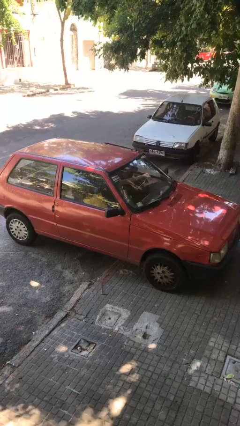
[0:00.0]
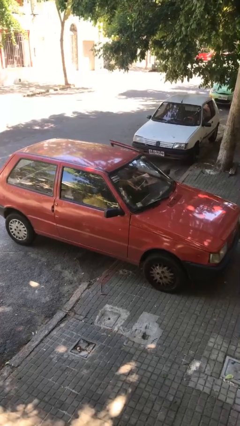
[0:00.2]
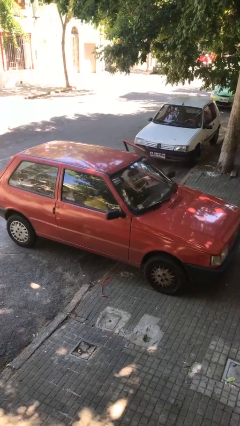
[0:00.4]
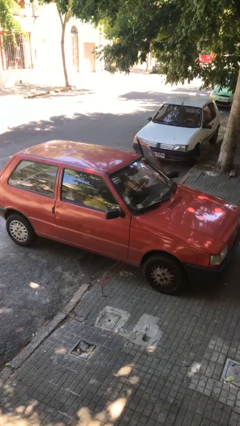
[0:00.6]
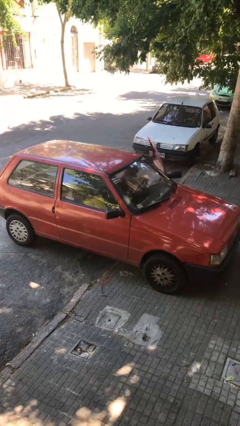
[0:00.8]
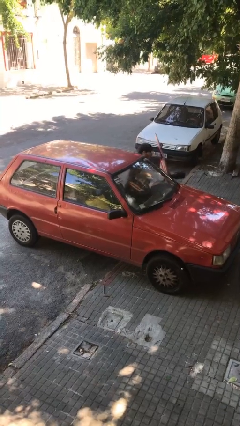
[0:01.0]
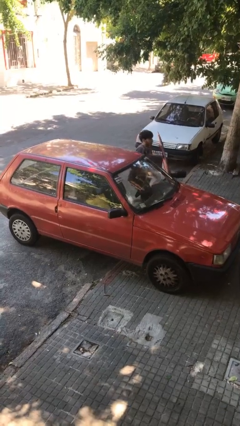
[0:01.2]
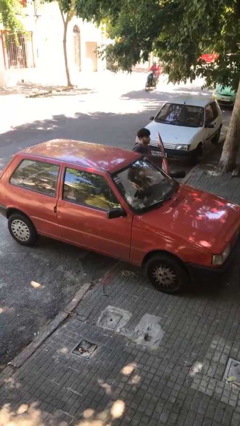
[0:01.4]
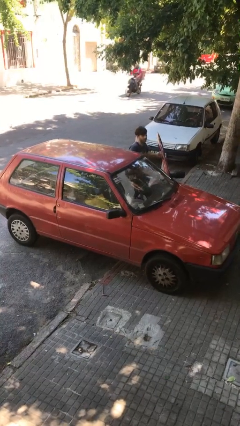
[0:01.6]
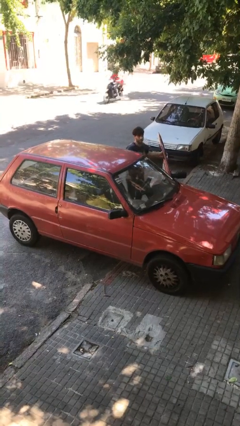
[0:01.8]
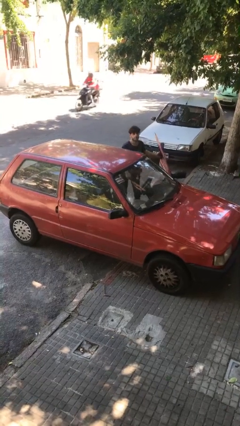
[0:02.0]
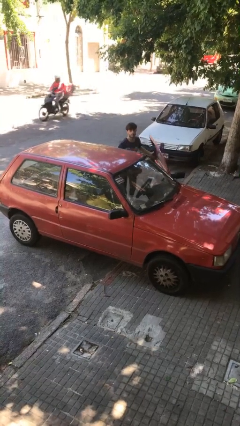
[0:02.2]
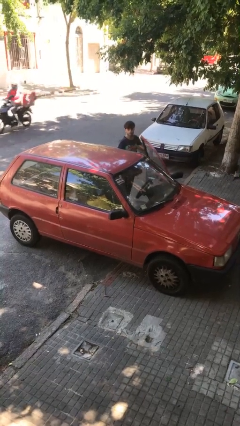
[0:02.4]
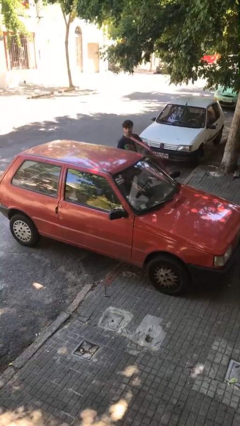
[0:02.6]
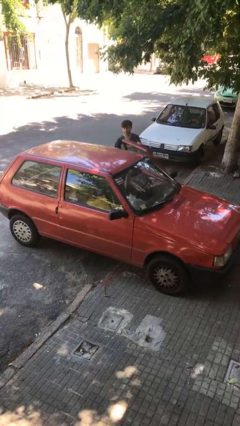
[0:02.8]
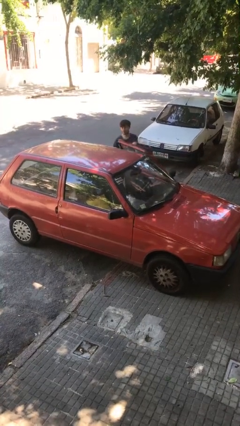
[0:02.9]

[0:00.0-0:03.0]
car drops off person

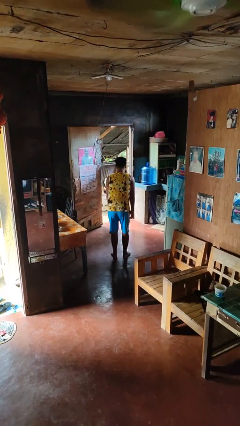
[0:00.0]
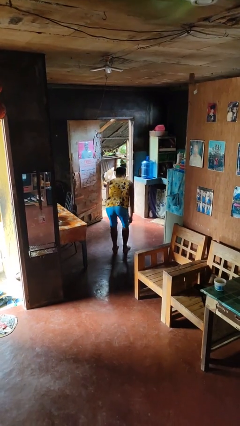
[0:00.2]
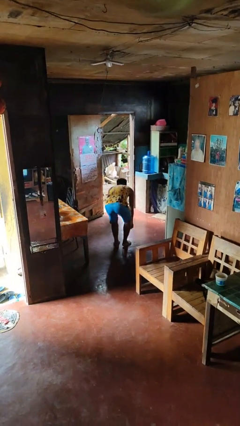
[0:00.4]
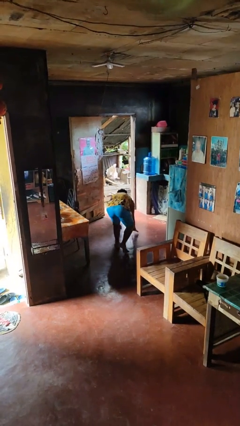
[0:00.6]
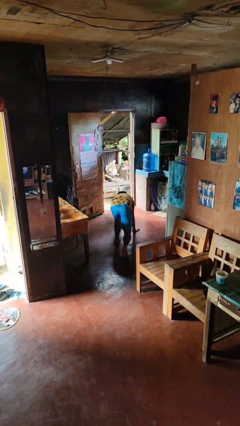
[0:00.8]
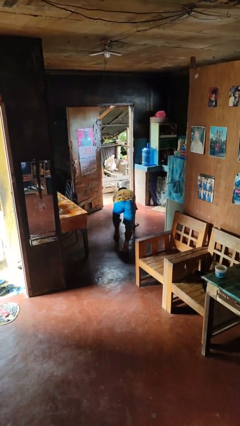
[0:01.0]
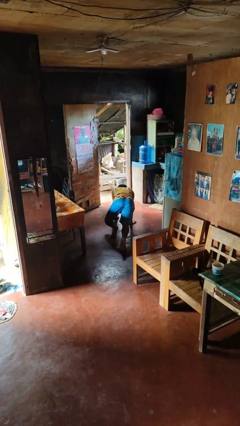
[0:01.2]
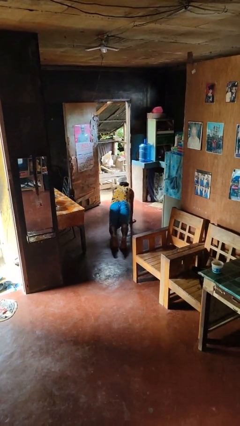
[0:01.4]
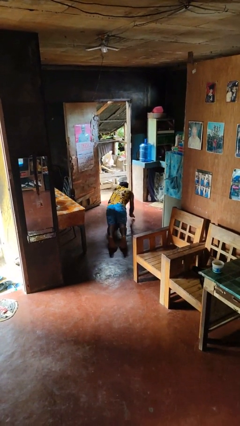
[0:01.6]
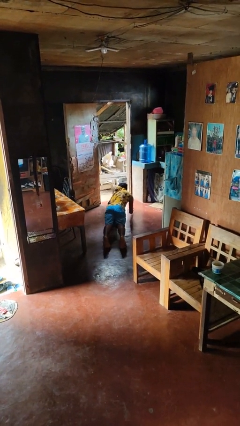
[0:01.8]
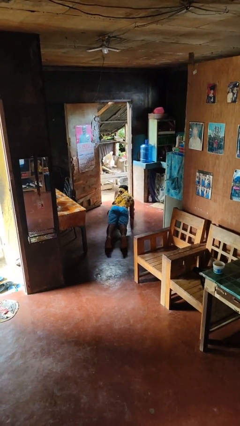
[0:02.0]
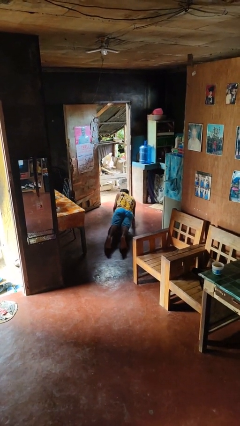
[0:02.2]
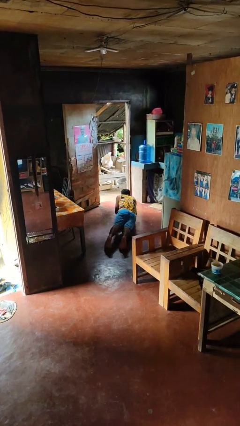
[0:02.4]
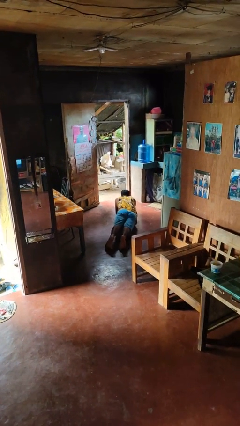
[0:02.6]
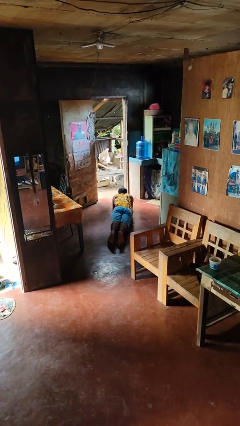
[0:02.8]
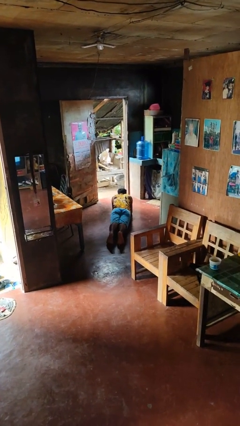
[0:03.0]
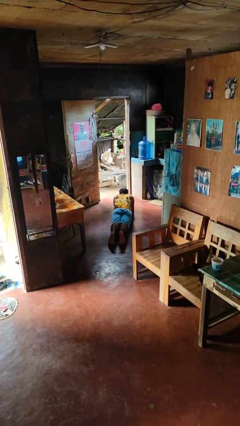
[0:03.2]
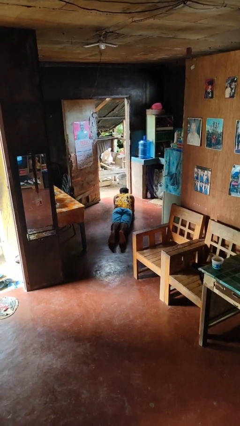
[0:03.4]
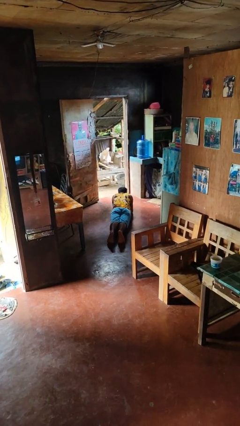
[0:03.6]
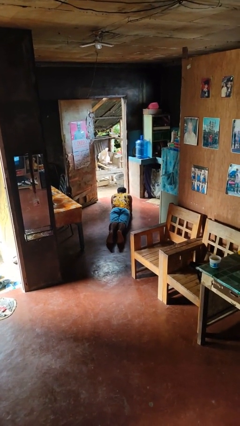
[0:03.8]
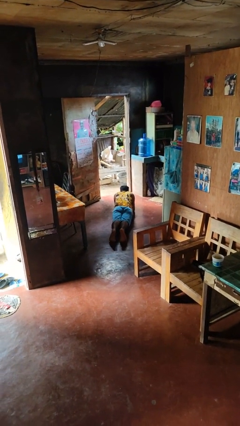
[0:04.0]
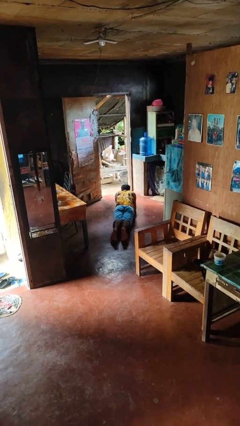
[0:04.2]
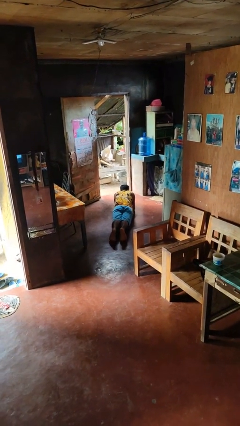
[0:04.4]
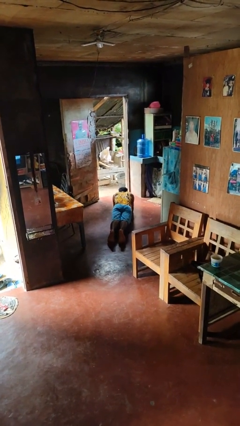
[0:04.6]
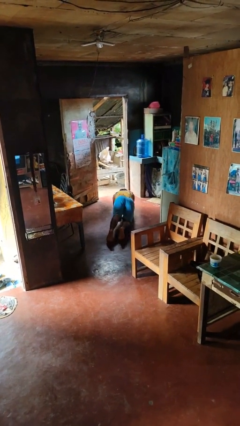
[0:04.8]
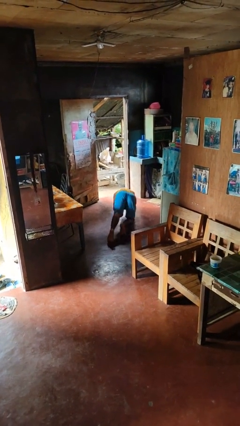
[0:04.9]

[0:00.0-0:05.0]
person exercises with plank

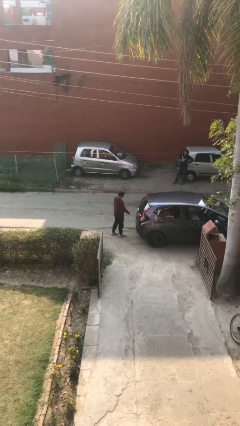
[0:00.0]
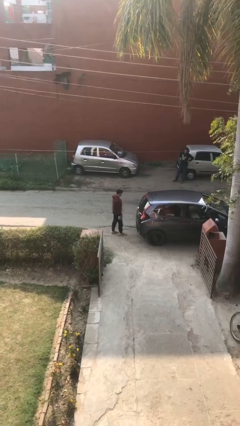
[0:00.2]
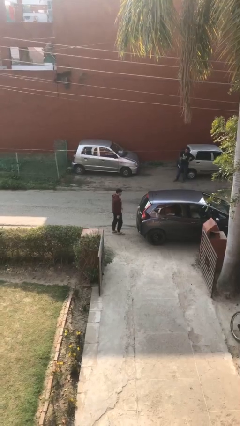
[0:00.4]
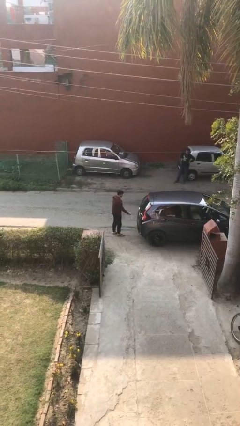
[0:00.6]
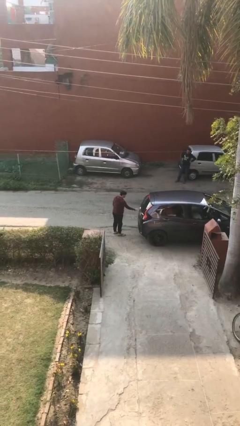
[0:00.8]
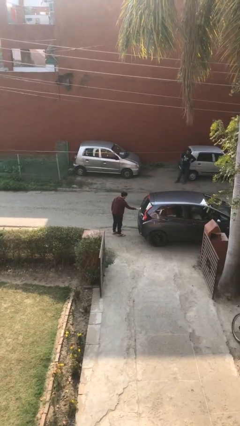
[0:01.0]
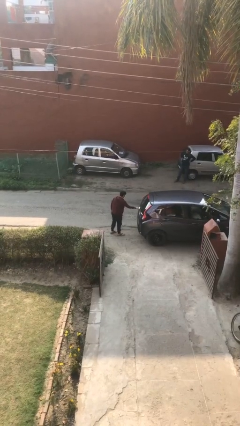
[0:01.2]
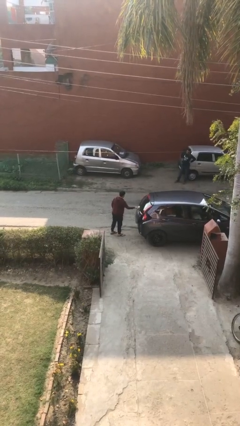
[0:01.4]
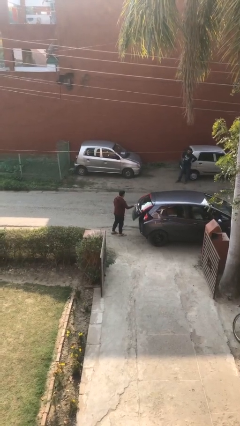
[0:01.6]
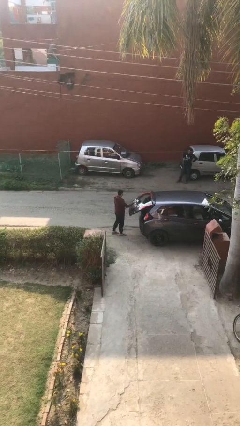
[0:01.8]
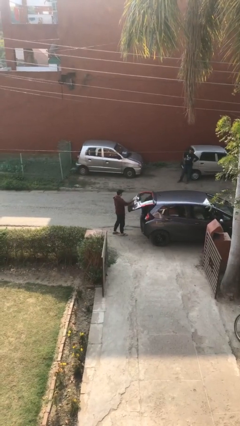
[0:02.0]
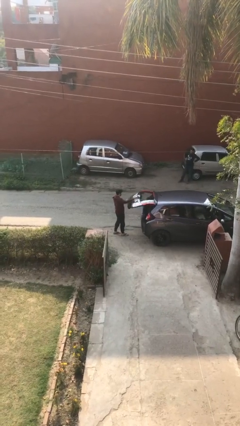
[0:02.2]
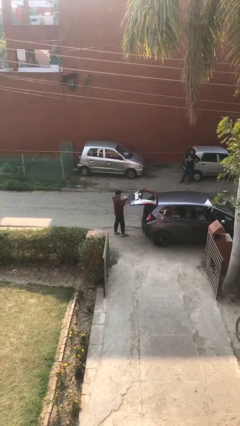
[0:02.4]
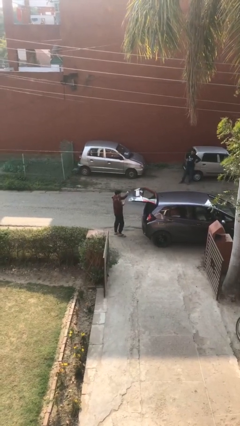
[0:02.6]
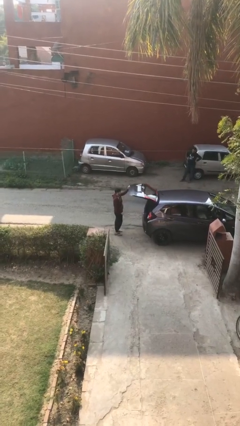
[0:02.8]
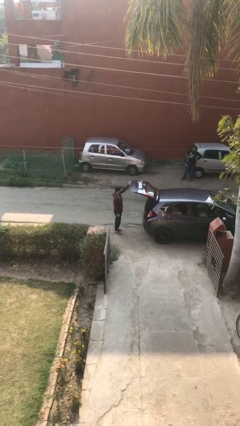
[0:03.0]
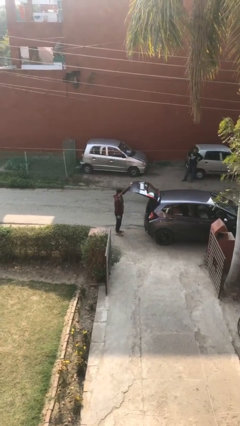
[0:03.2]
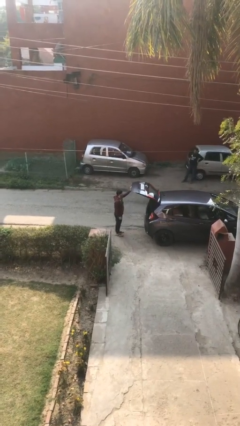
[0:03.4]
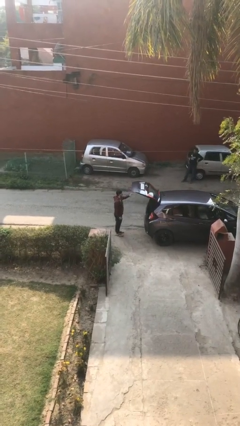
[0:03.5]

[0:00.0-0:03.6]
person opens car trunk

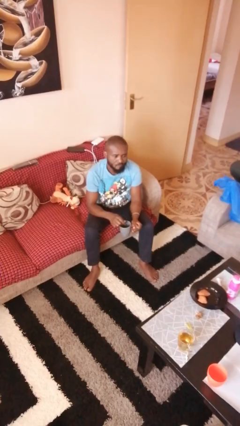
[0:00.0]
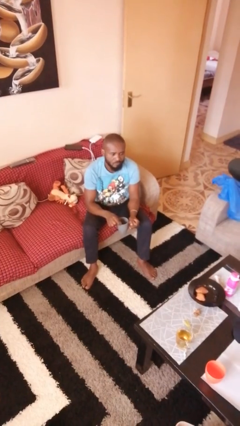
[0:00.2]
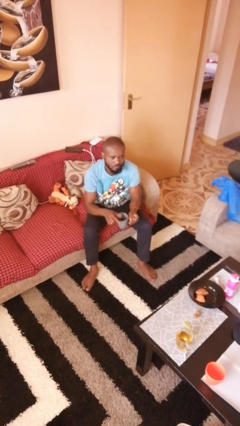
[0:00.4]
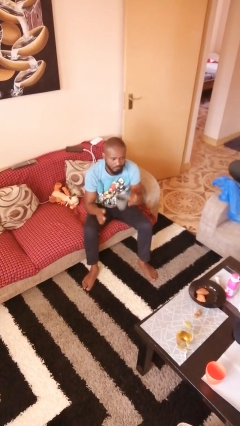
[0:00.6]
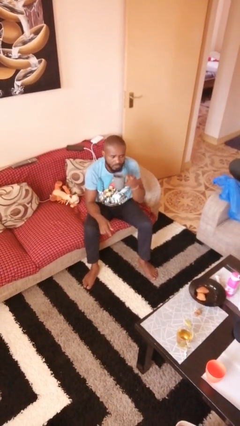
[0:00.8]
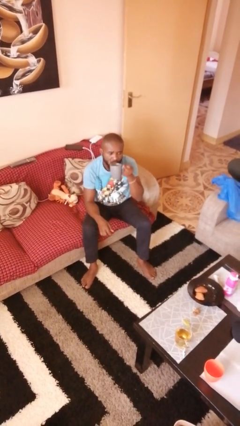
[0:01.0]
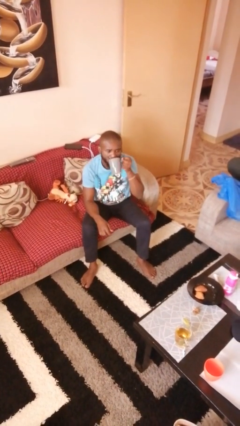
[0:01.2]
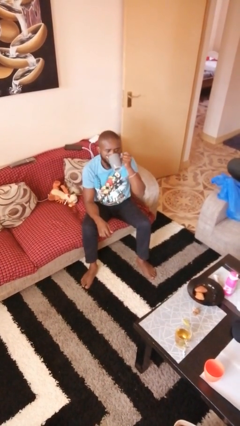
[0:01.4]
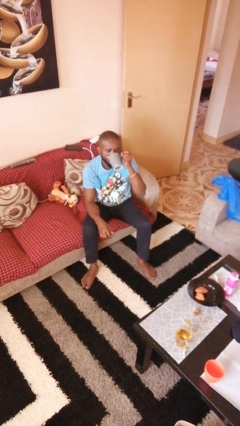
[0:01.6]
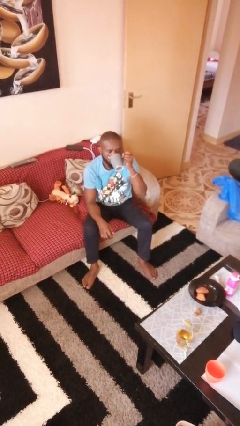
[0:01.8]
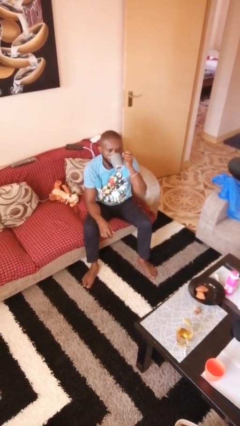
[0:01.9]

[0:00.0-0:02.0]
person drinks from mug

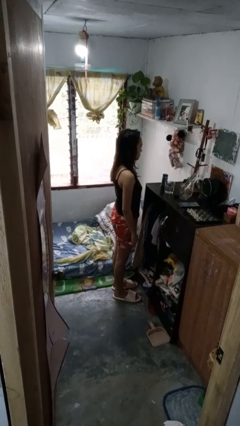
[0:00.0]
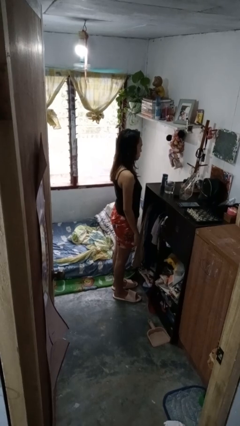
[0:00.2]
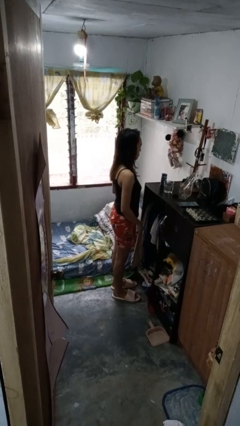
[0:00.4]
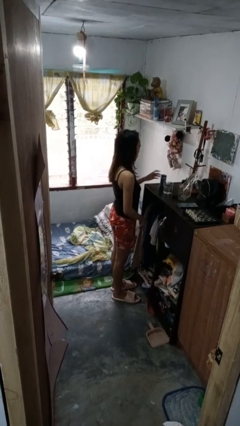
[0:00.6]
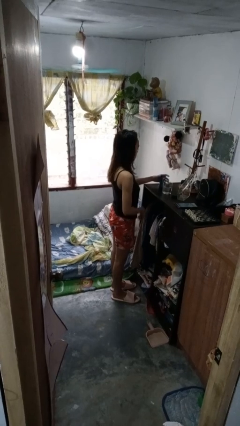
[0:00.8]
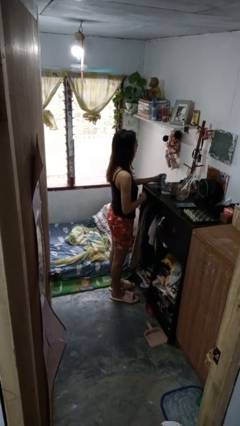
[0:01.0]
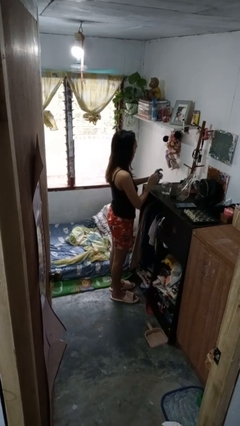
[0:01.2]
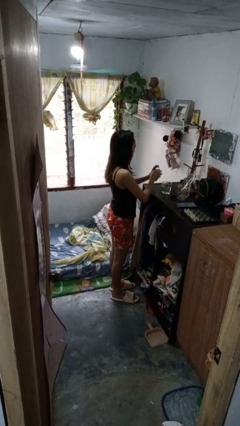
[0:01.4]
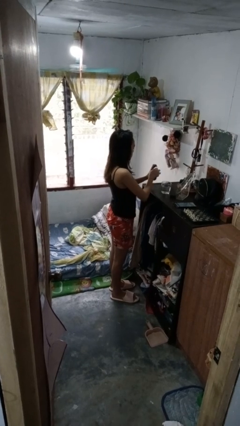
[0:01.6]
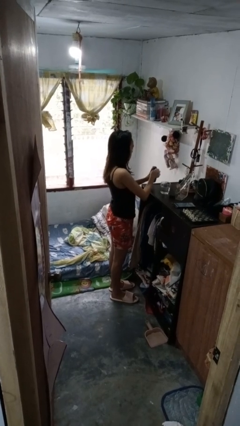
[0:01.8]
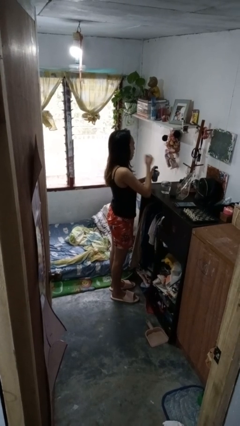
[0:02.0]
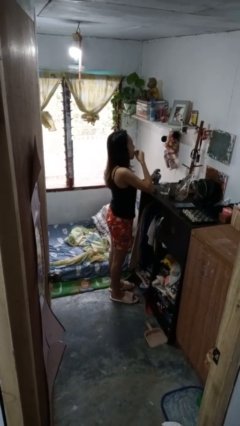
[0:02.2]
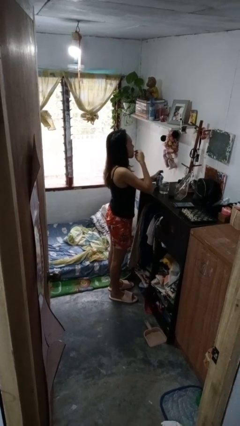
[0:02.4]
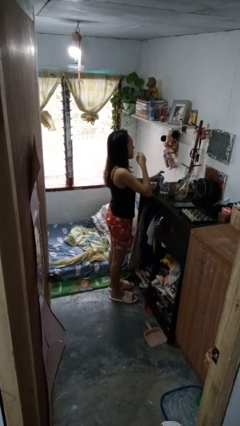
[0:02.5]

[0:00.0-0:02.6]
person takes medicine pills

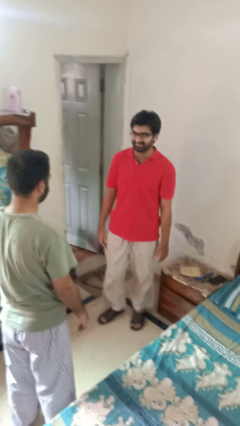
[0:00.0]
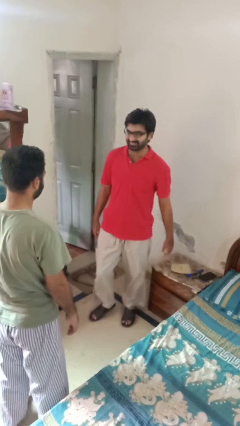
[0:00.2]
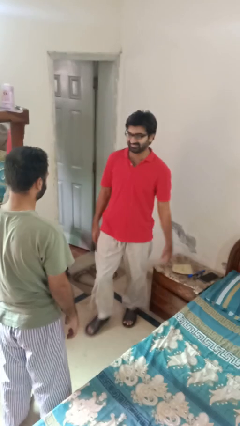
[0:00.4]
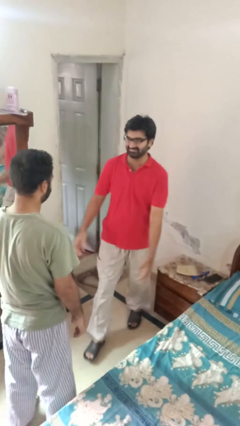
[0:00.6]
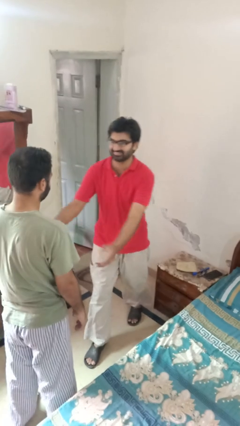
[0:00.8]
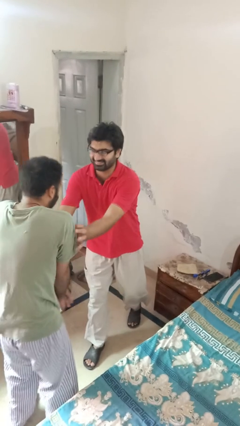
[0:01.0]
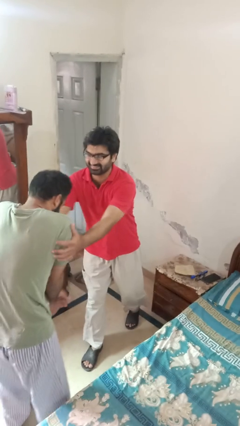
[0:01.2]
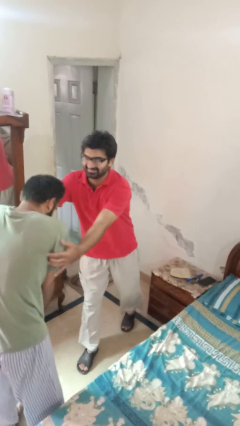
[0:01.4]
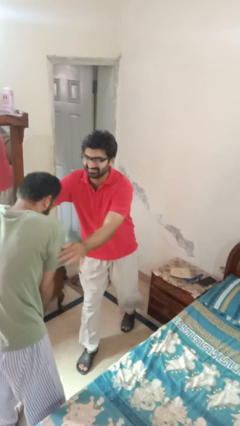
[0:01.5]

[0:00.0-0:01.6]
person tickles person
